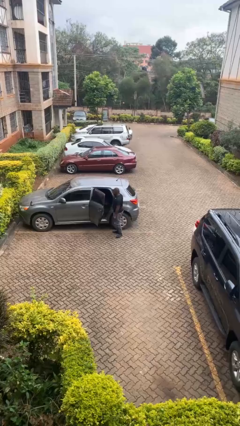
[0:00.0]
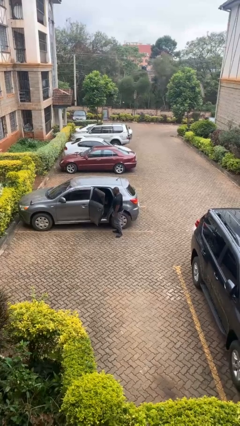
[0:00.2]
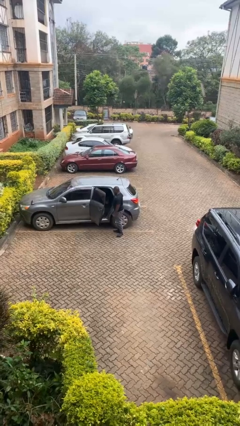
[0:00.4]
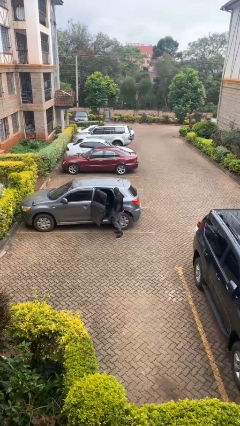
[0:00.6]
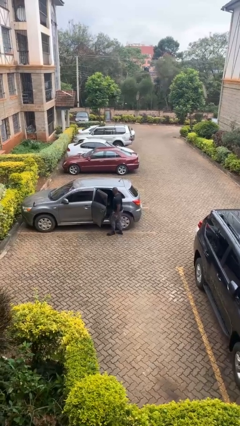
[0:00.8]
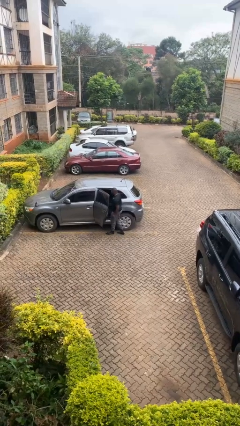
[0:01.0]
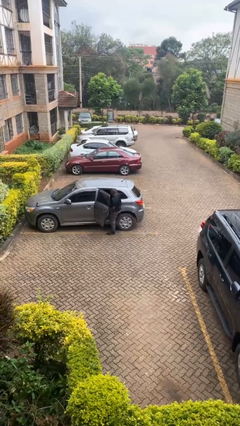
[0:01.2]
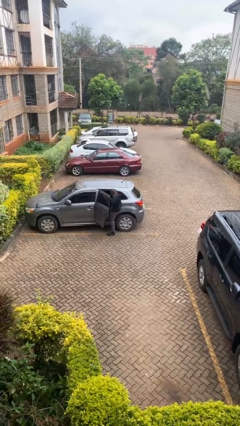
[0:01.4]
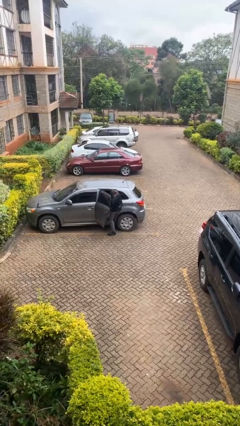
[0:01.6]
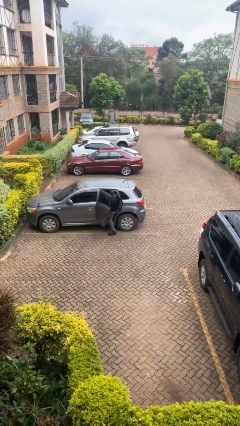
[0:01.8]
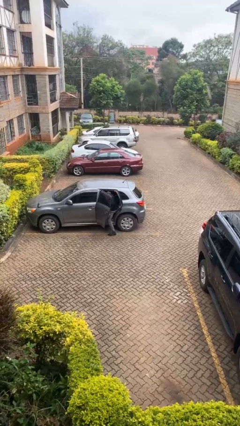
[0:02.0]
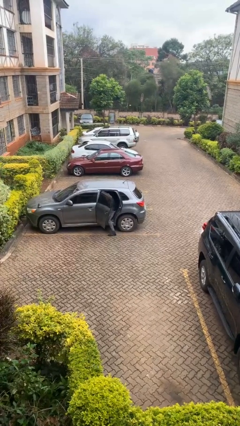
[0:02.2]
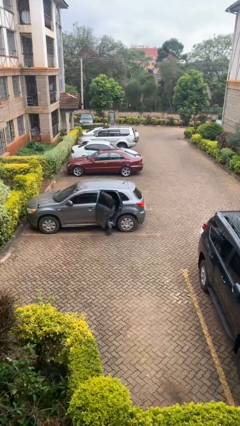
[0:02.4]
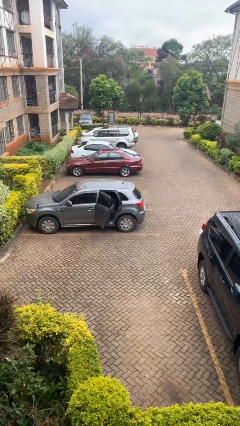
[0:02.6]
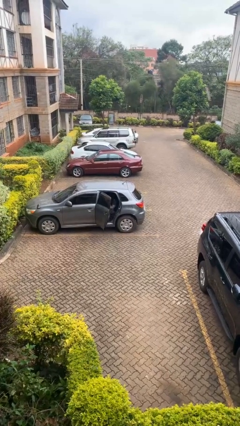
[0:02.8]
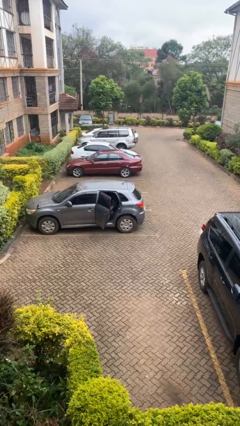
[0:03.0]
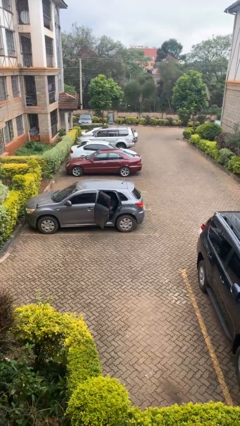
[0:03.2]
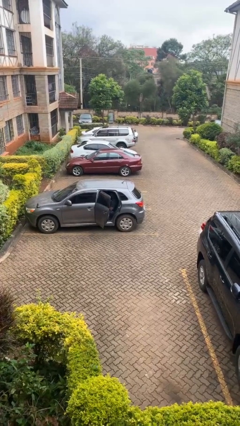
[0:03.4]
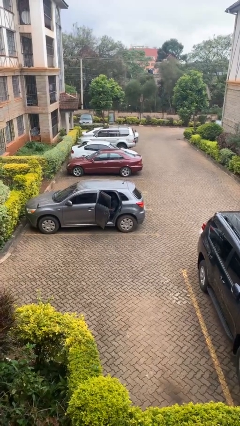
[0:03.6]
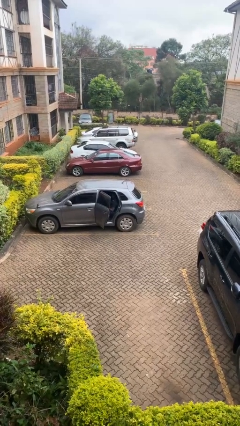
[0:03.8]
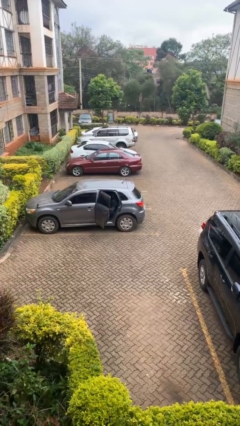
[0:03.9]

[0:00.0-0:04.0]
person enters car

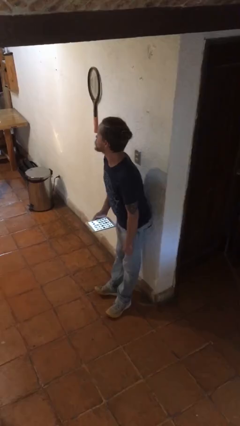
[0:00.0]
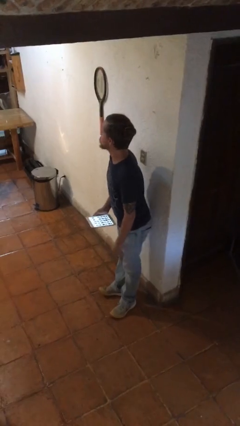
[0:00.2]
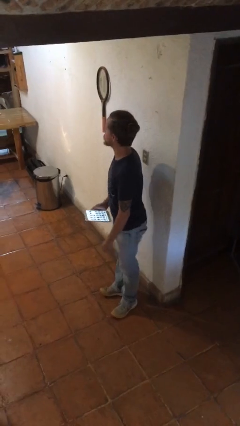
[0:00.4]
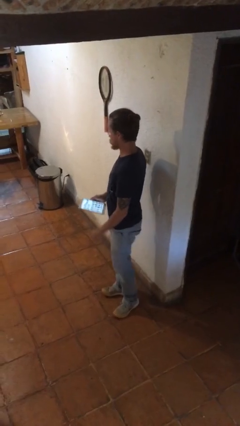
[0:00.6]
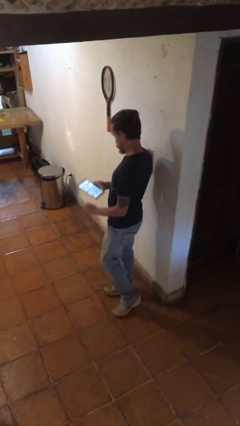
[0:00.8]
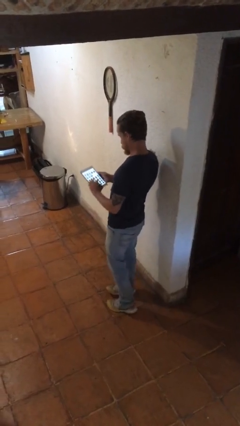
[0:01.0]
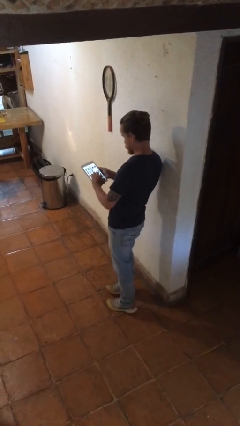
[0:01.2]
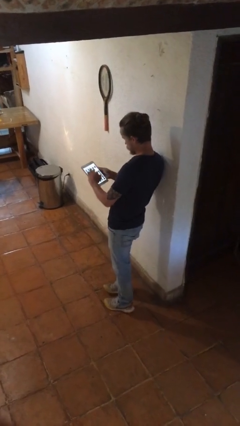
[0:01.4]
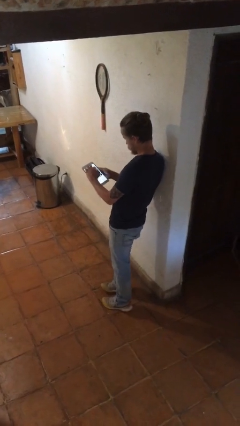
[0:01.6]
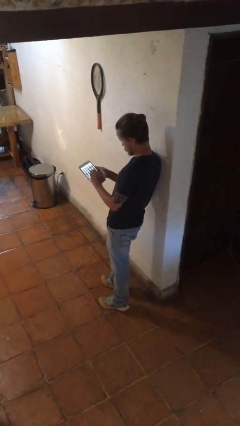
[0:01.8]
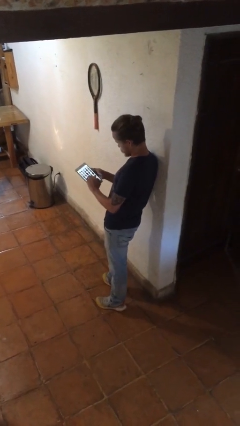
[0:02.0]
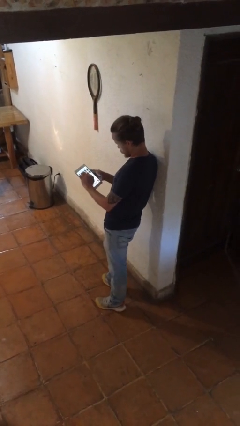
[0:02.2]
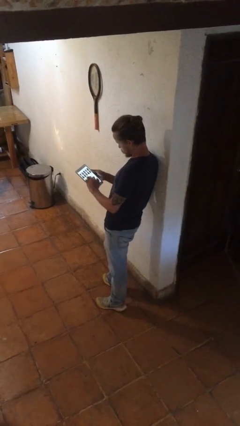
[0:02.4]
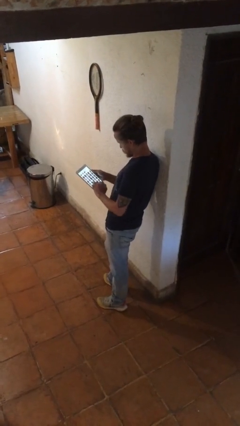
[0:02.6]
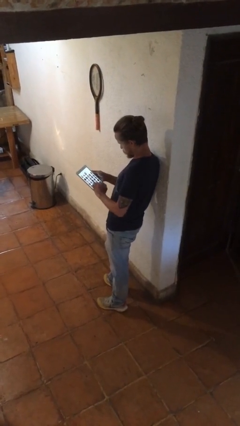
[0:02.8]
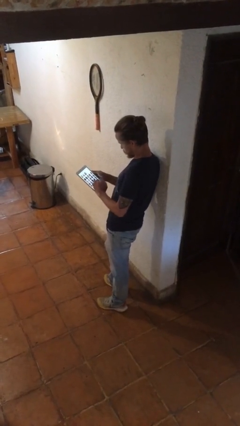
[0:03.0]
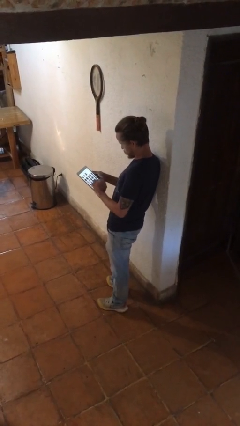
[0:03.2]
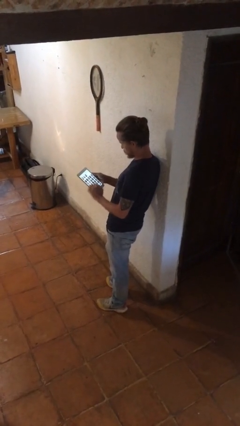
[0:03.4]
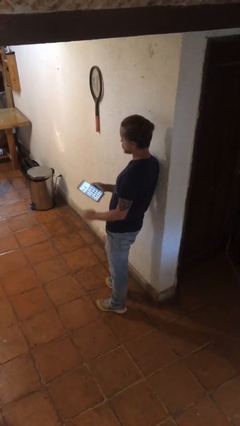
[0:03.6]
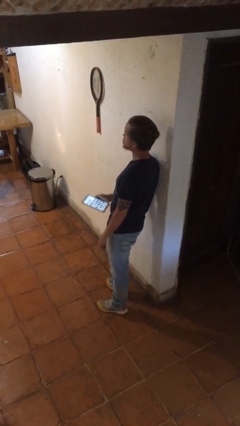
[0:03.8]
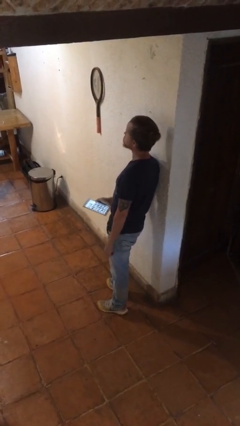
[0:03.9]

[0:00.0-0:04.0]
person interacts with tablet

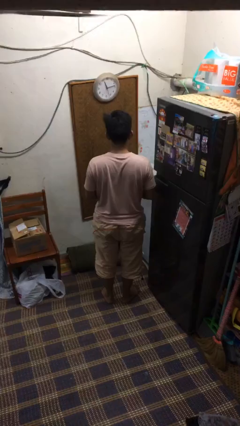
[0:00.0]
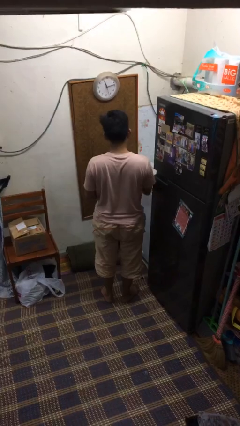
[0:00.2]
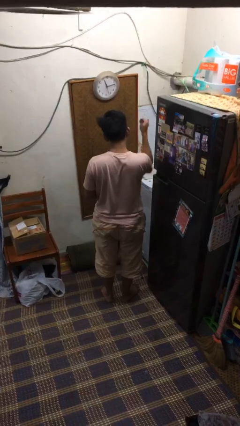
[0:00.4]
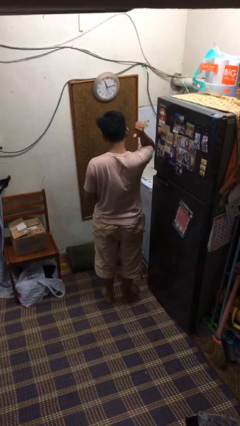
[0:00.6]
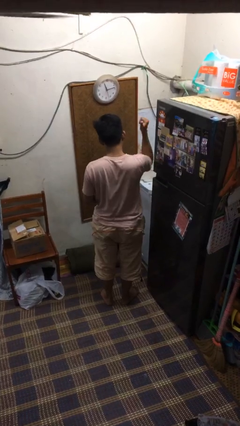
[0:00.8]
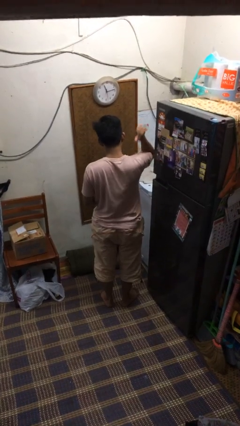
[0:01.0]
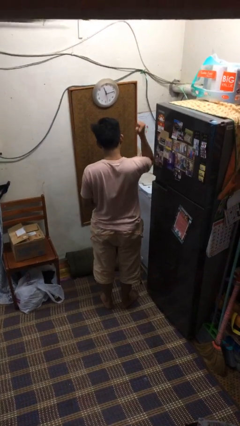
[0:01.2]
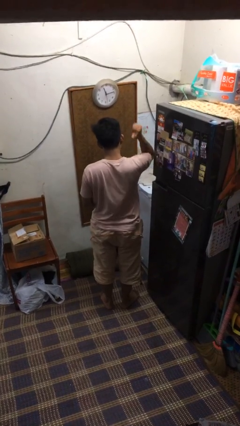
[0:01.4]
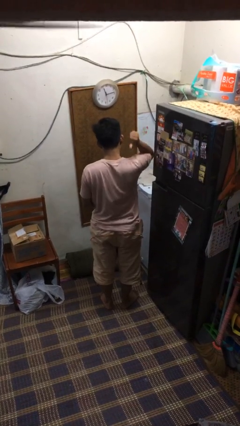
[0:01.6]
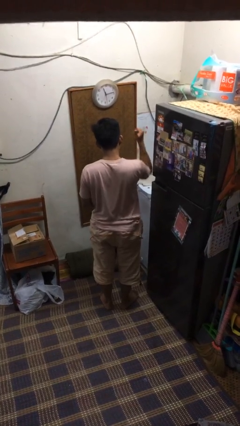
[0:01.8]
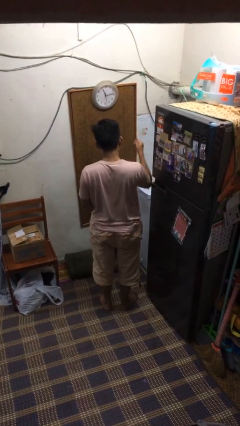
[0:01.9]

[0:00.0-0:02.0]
person gestures behind me

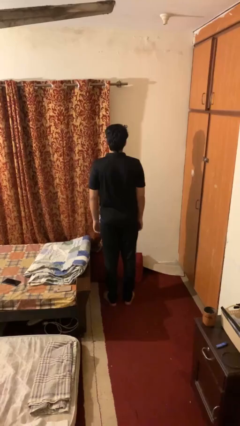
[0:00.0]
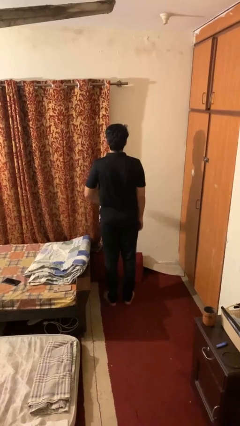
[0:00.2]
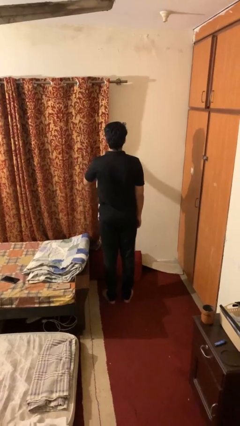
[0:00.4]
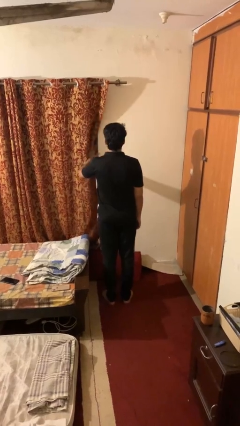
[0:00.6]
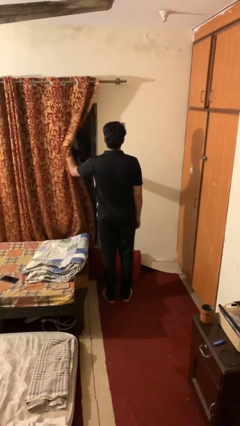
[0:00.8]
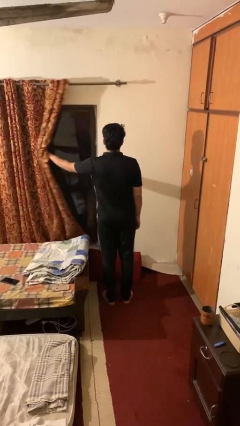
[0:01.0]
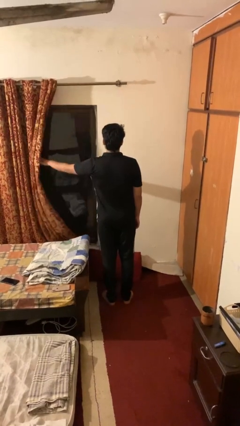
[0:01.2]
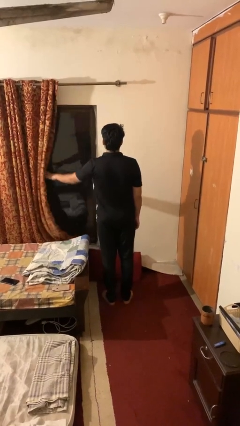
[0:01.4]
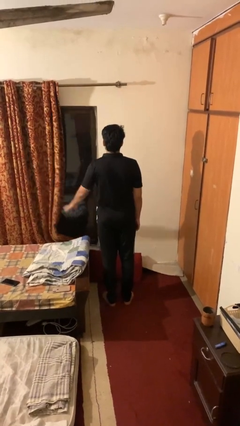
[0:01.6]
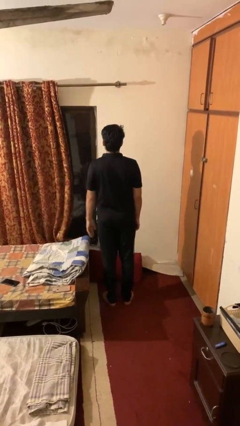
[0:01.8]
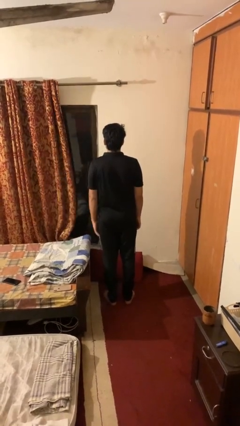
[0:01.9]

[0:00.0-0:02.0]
person opens curtains

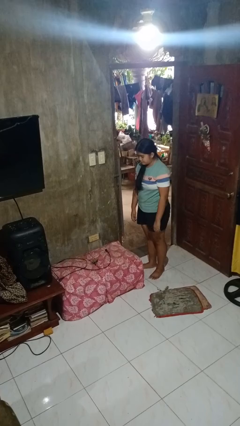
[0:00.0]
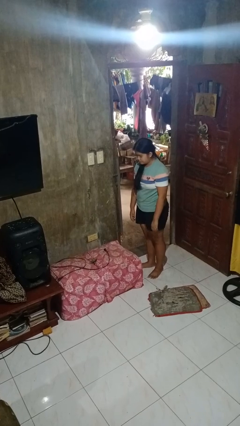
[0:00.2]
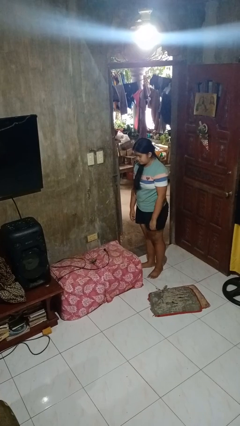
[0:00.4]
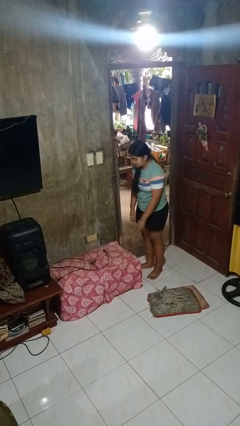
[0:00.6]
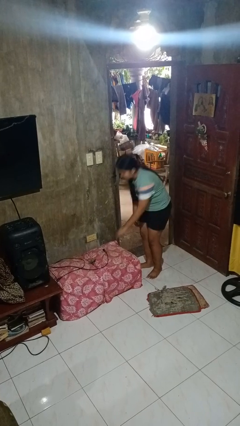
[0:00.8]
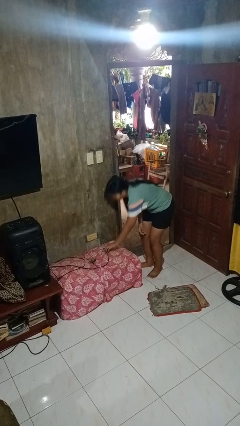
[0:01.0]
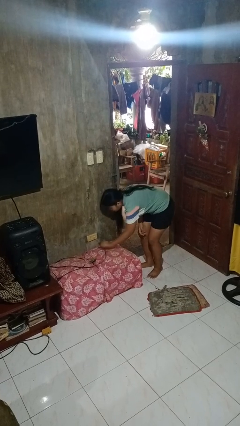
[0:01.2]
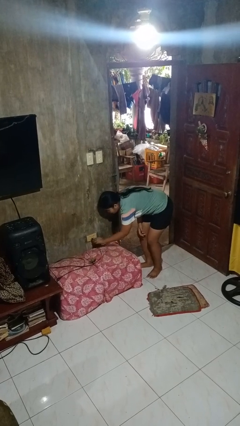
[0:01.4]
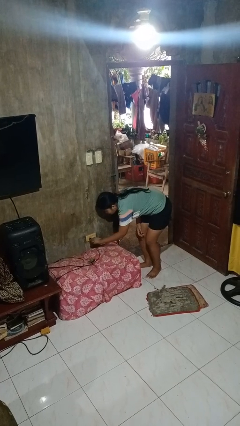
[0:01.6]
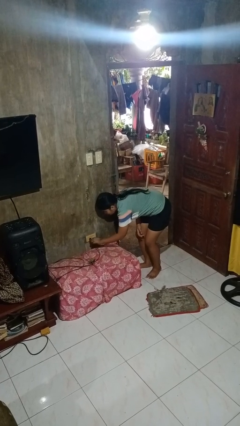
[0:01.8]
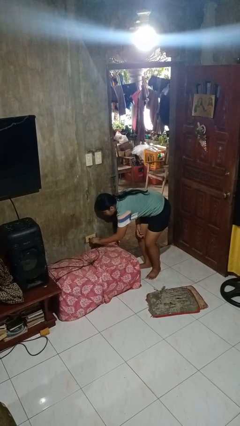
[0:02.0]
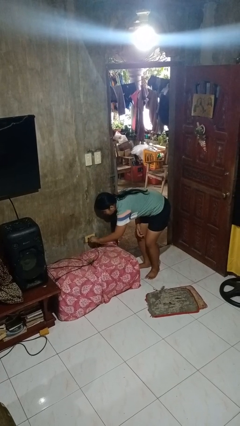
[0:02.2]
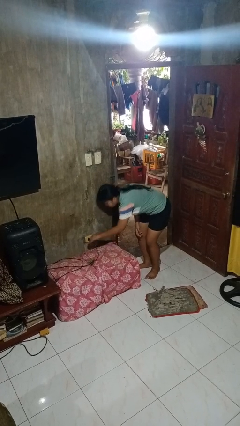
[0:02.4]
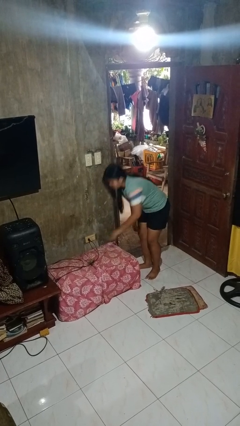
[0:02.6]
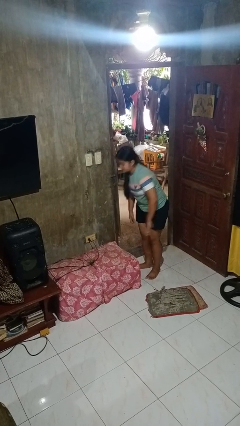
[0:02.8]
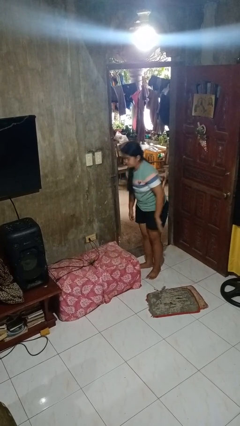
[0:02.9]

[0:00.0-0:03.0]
person plugs into electrical socket

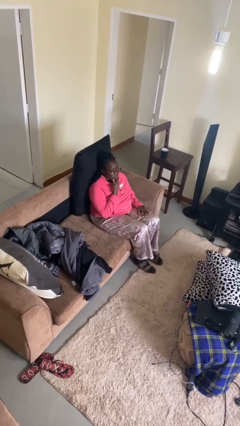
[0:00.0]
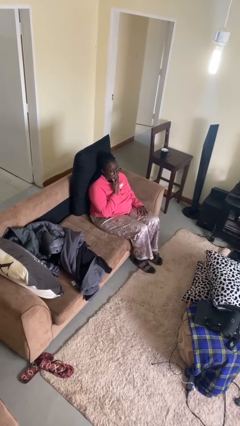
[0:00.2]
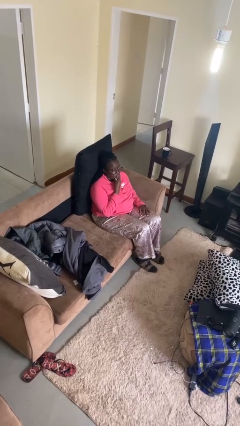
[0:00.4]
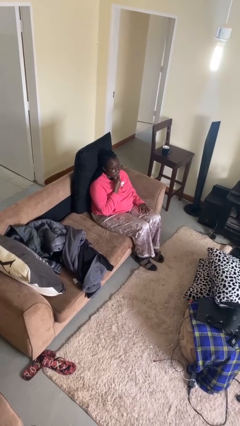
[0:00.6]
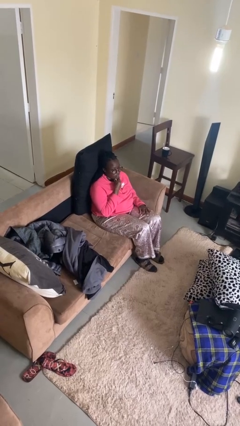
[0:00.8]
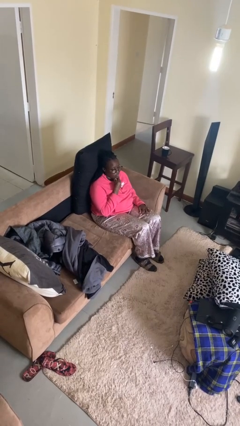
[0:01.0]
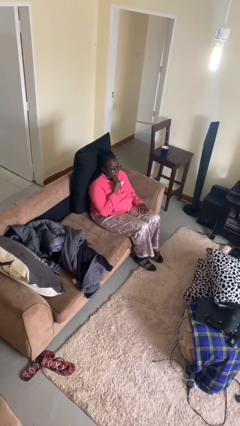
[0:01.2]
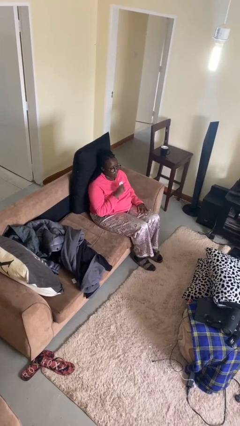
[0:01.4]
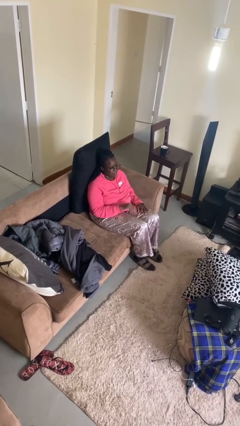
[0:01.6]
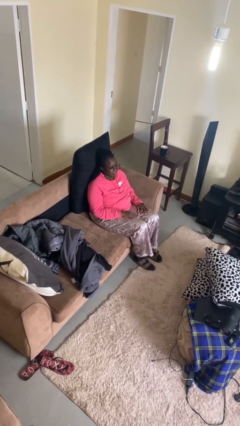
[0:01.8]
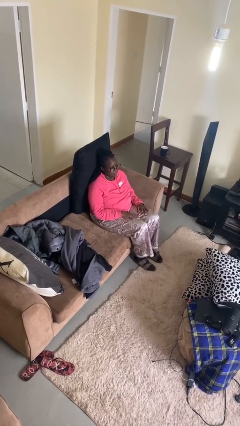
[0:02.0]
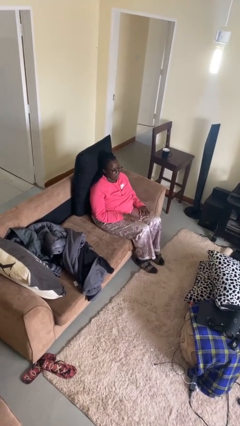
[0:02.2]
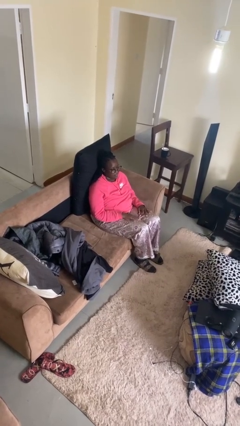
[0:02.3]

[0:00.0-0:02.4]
person strokes chin
